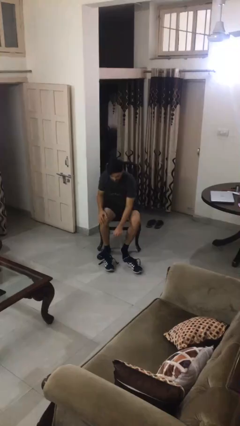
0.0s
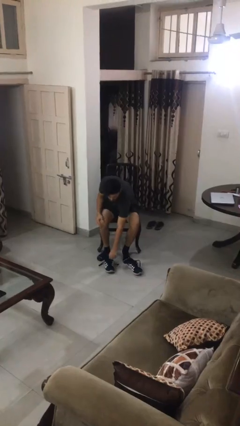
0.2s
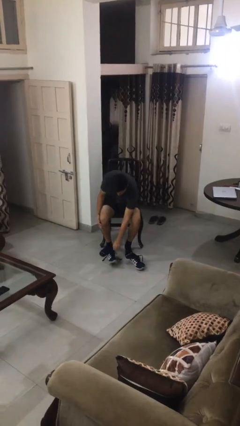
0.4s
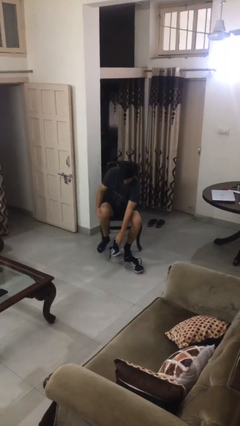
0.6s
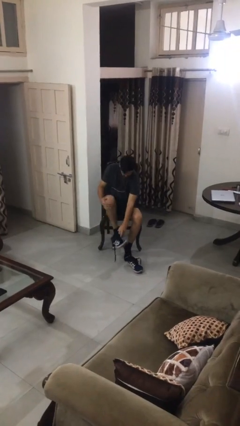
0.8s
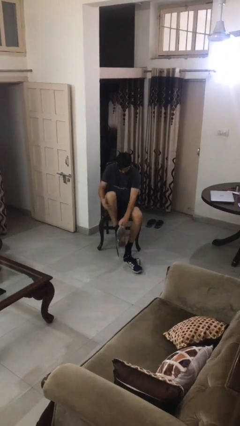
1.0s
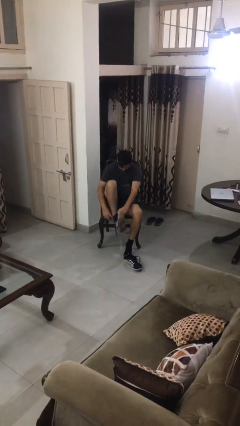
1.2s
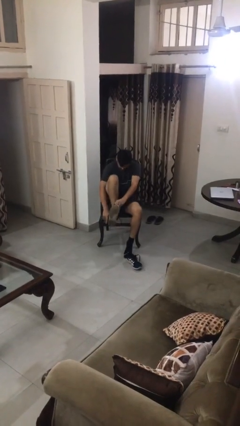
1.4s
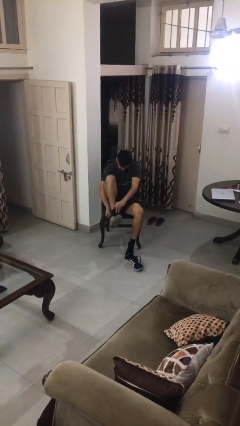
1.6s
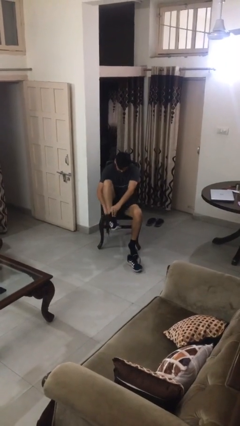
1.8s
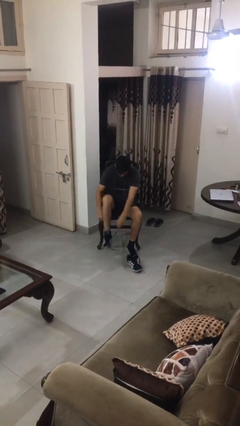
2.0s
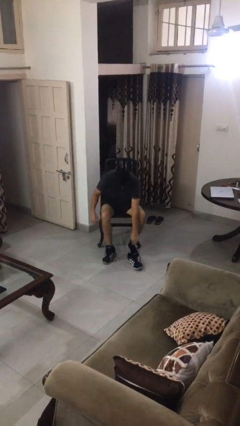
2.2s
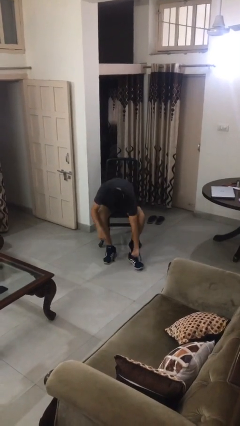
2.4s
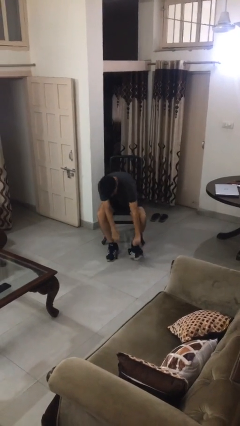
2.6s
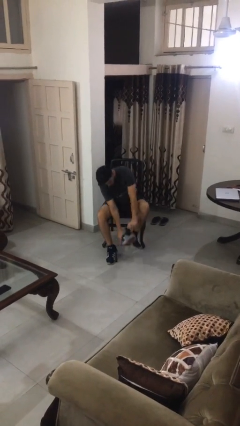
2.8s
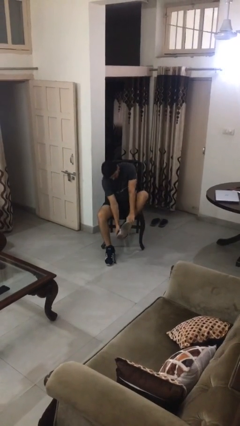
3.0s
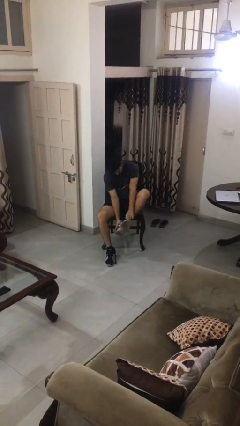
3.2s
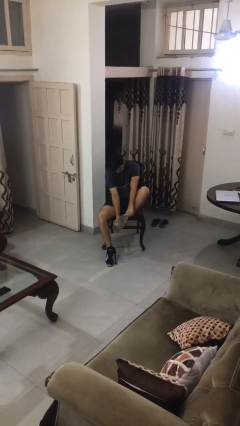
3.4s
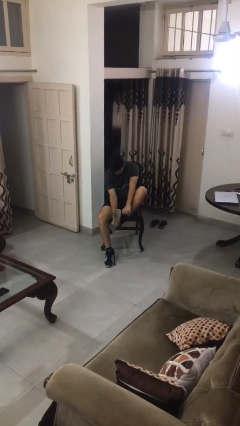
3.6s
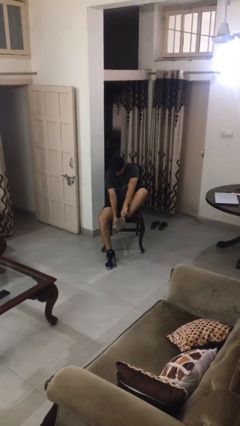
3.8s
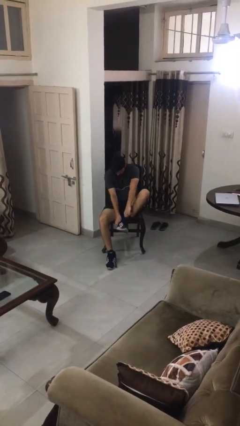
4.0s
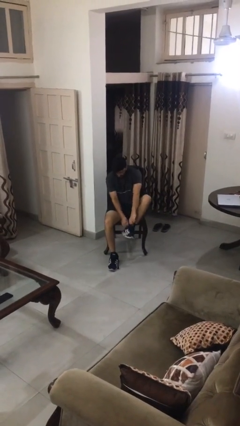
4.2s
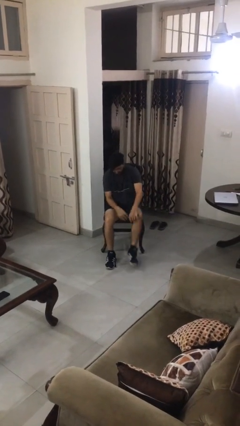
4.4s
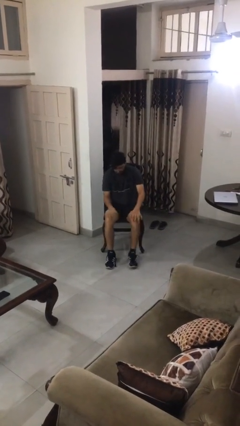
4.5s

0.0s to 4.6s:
person puts on shoes

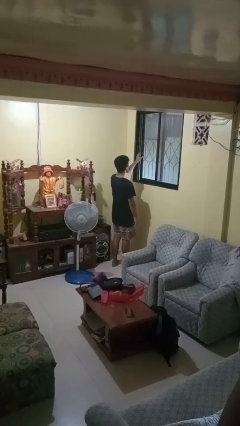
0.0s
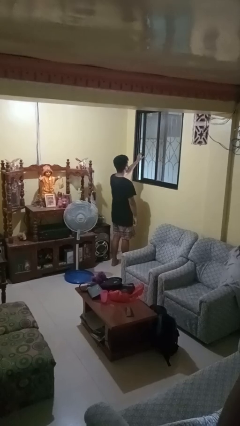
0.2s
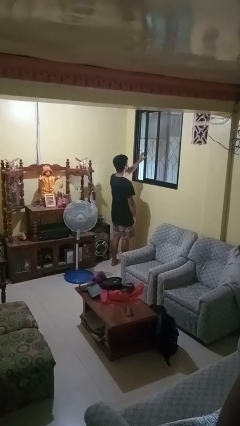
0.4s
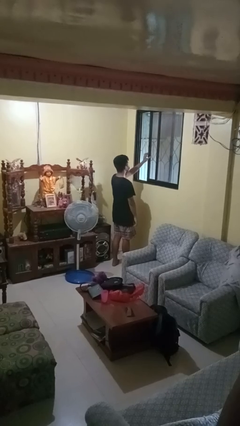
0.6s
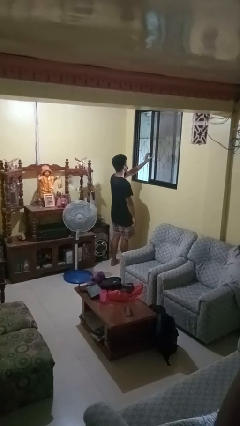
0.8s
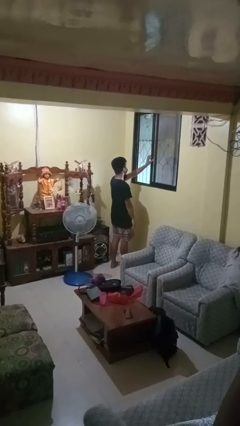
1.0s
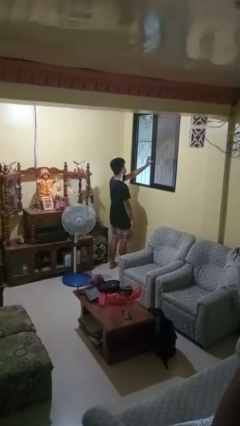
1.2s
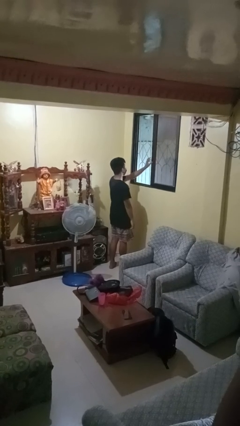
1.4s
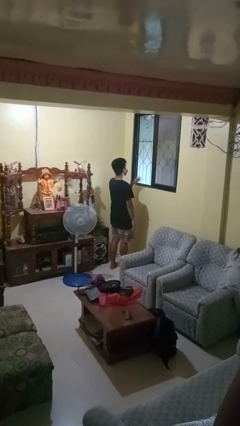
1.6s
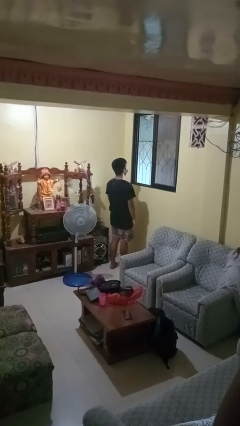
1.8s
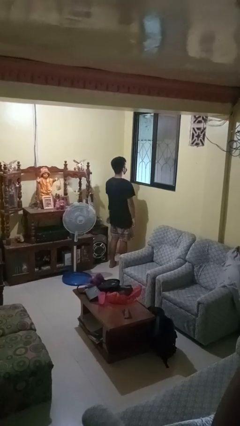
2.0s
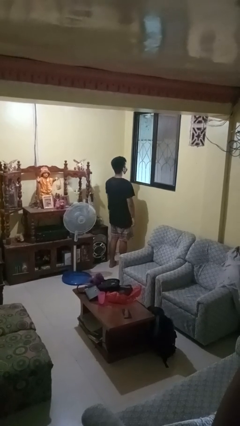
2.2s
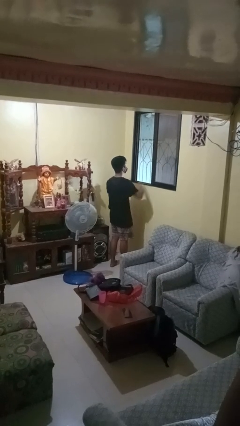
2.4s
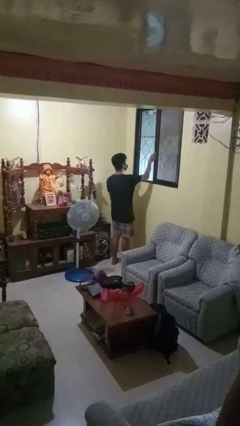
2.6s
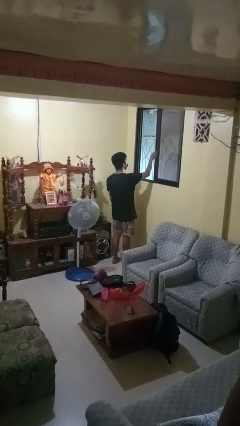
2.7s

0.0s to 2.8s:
person opens home window

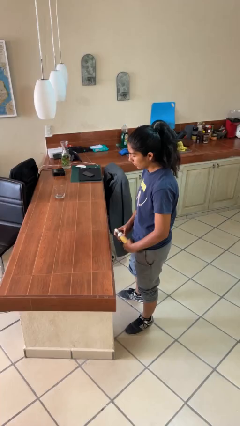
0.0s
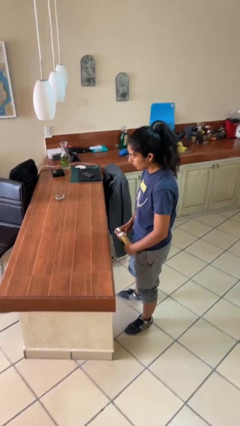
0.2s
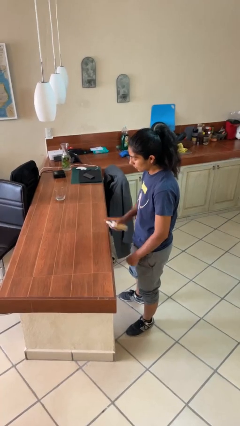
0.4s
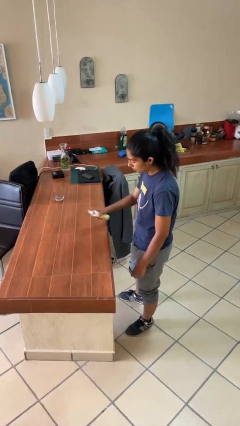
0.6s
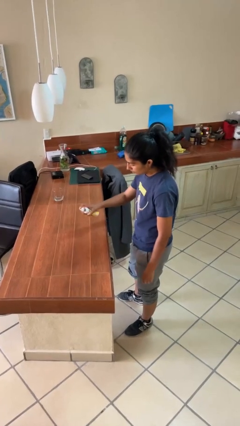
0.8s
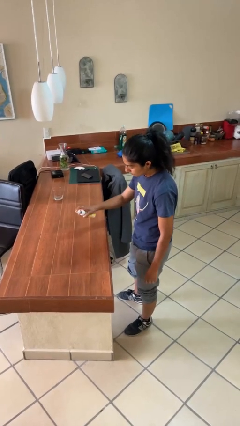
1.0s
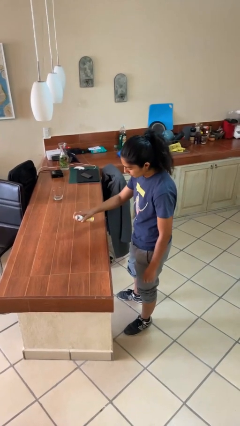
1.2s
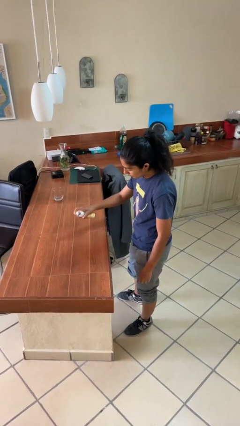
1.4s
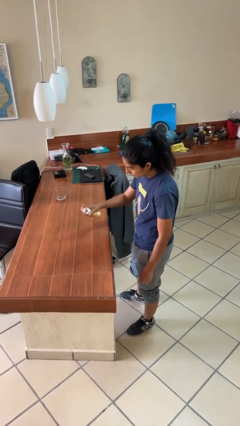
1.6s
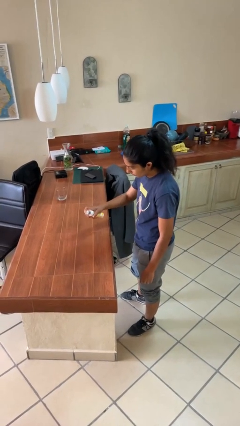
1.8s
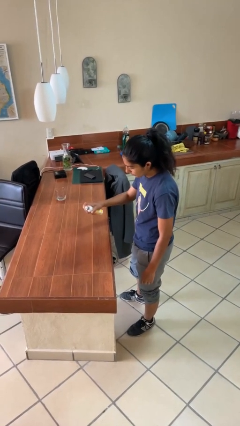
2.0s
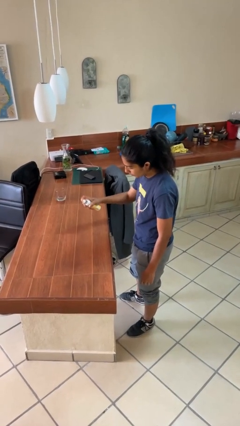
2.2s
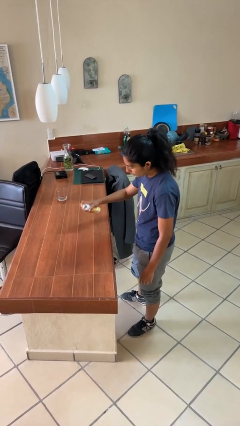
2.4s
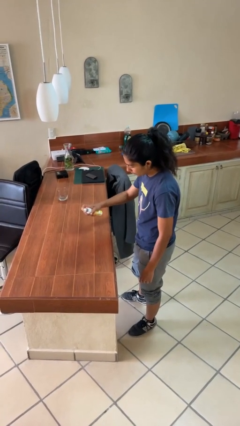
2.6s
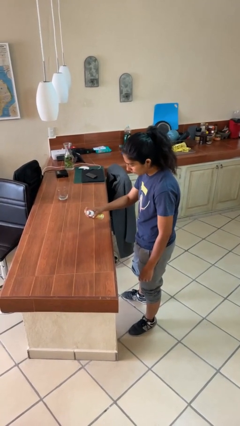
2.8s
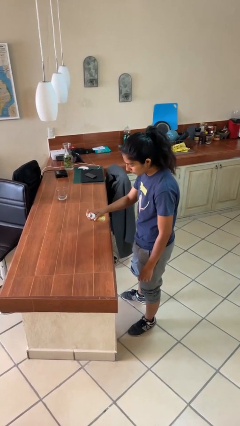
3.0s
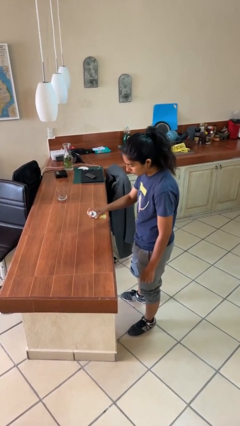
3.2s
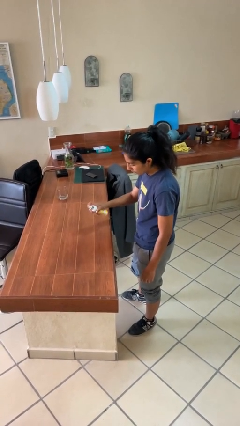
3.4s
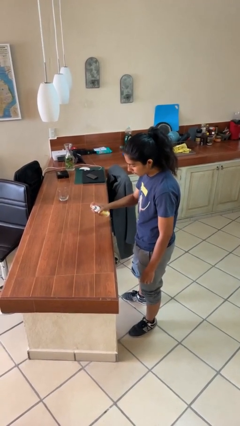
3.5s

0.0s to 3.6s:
person sprays from bottle

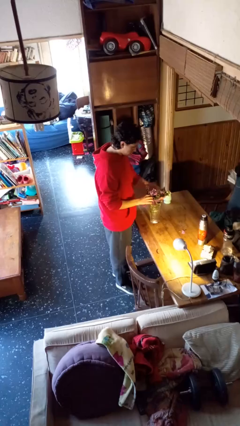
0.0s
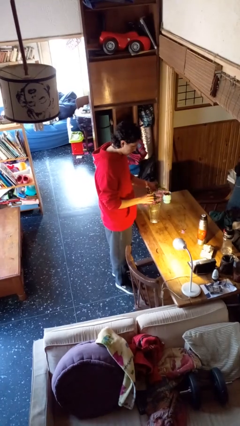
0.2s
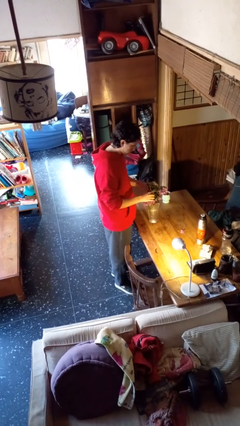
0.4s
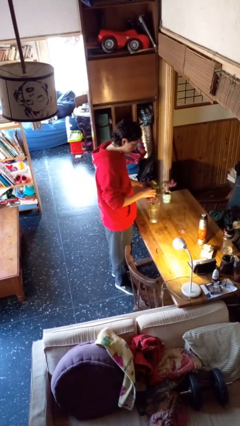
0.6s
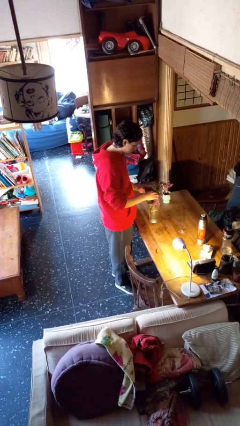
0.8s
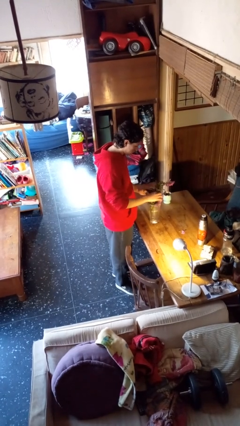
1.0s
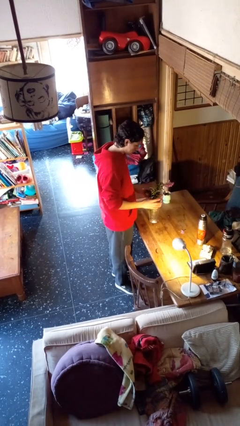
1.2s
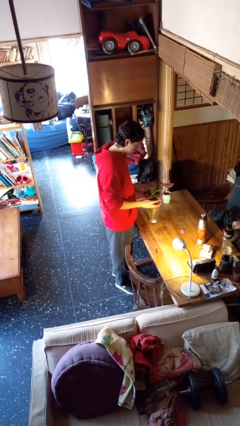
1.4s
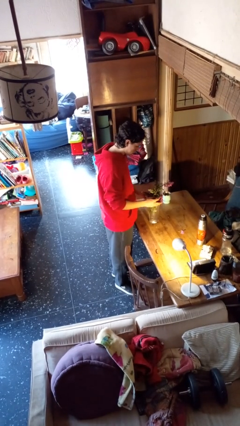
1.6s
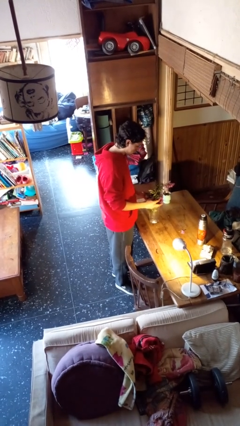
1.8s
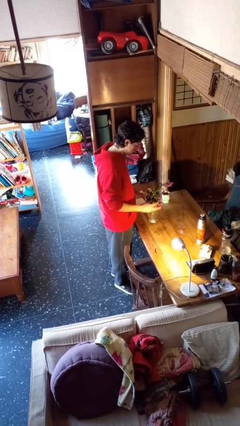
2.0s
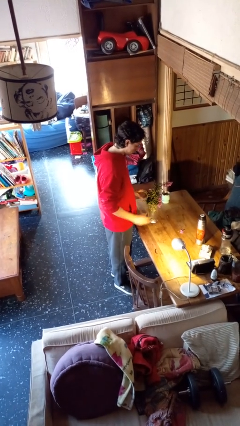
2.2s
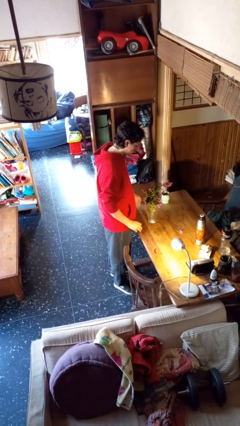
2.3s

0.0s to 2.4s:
person arranges flowers in vase

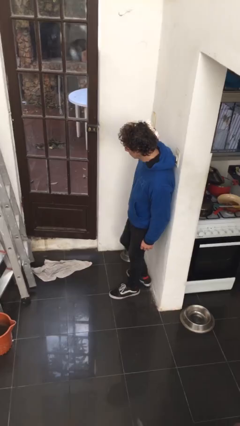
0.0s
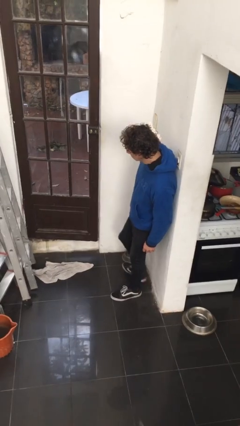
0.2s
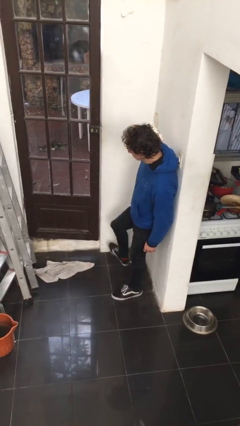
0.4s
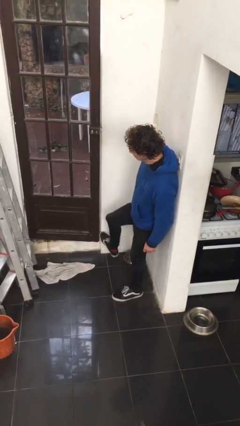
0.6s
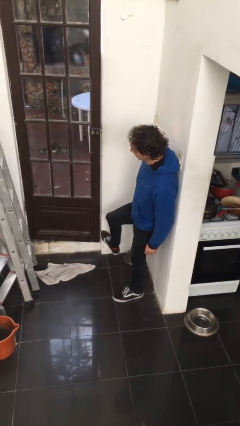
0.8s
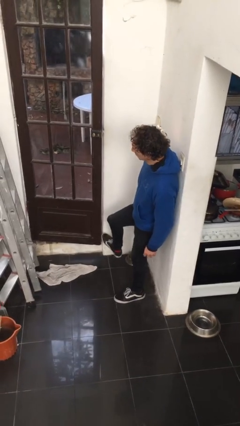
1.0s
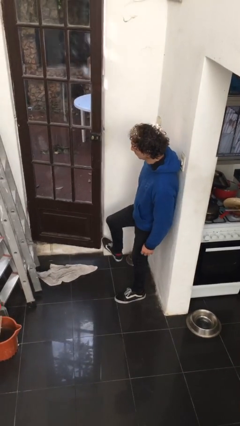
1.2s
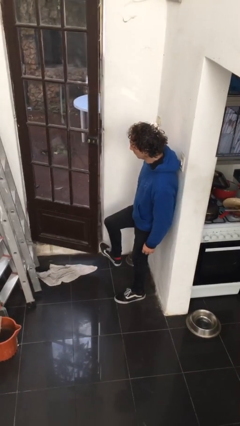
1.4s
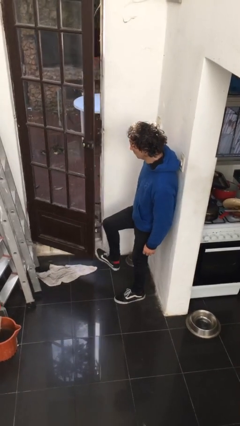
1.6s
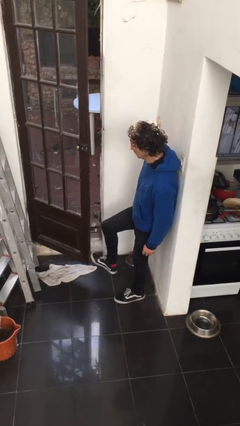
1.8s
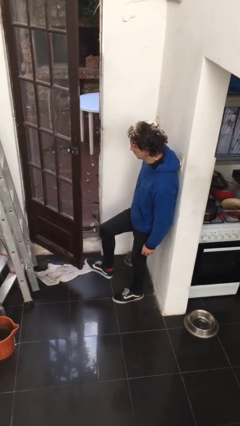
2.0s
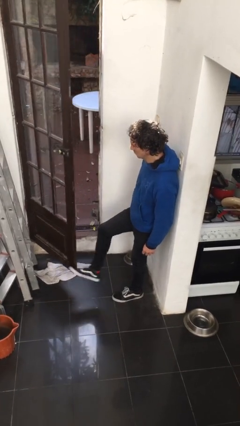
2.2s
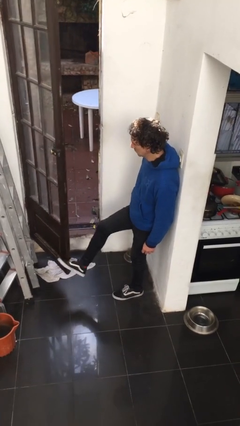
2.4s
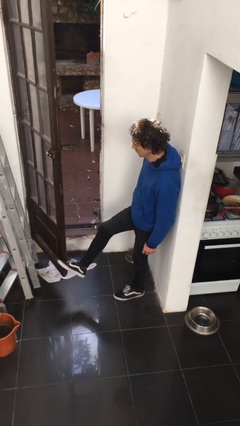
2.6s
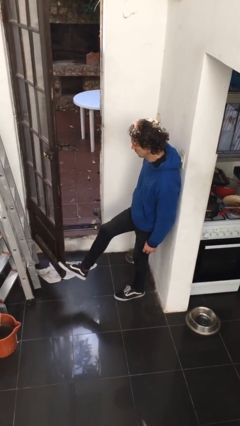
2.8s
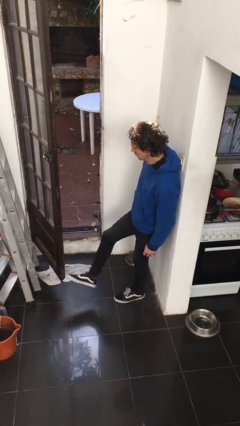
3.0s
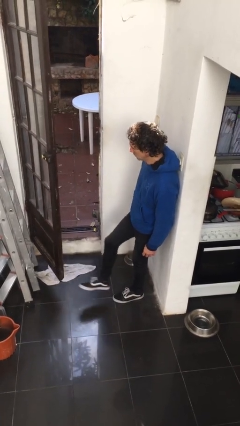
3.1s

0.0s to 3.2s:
person opens facility door

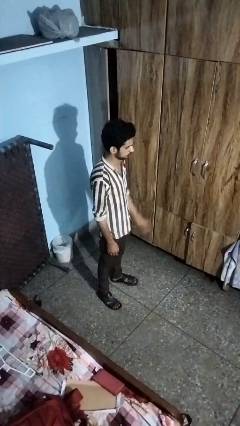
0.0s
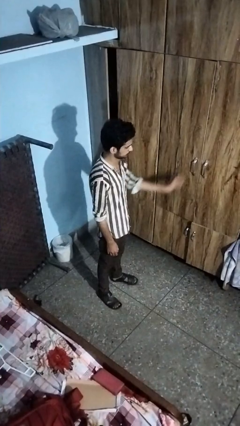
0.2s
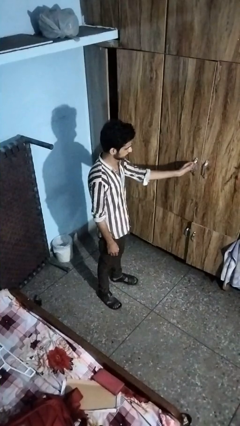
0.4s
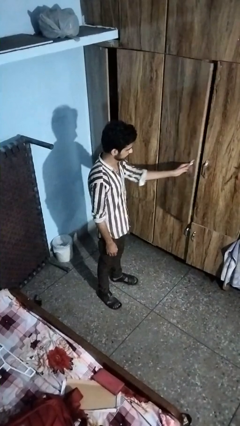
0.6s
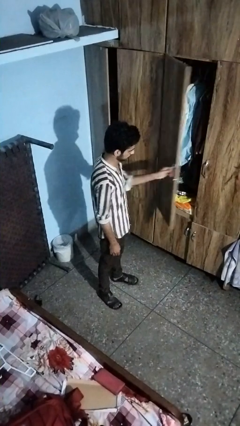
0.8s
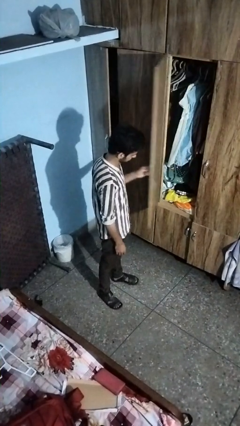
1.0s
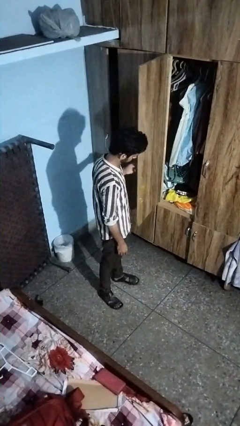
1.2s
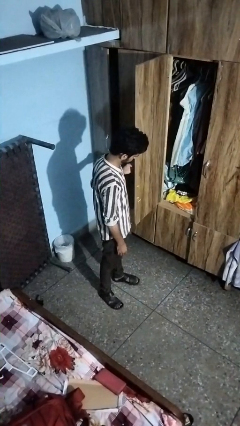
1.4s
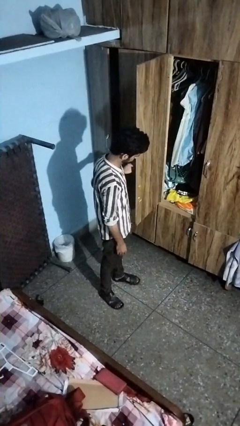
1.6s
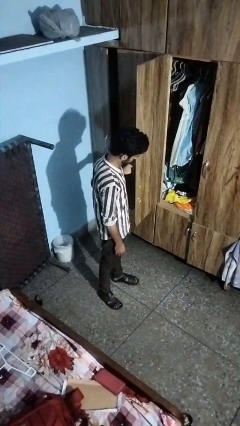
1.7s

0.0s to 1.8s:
person opens closet door
